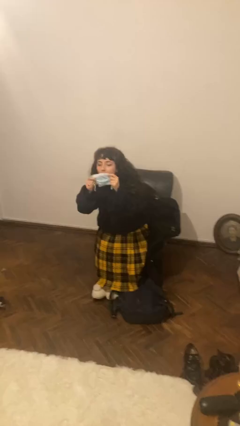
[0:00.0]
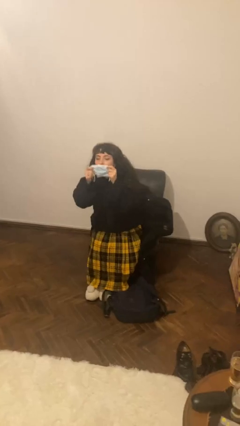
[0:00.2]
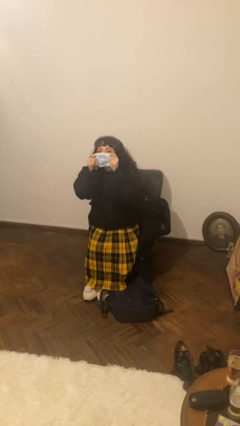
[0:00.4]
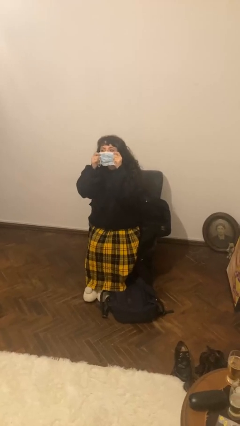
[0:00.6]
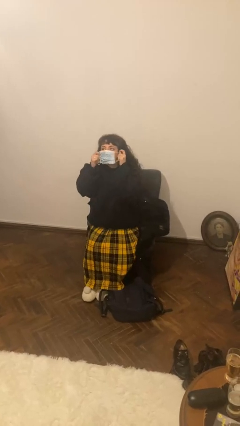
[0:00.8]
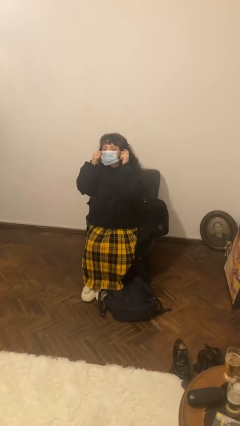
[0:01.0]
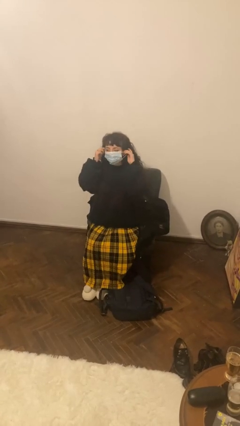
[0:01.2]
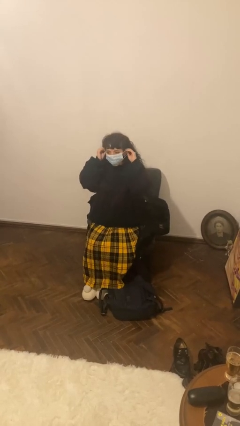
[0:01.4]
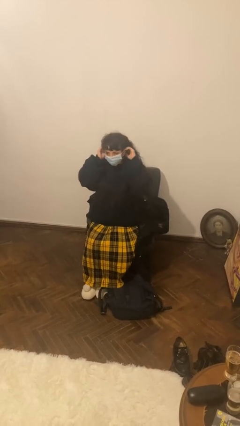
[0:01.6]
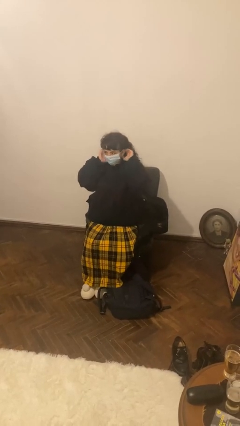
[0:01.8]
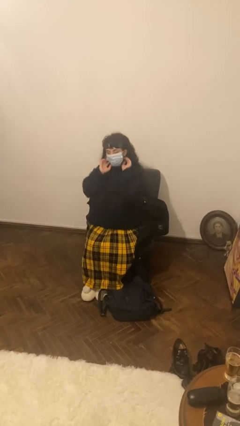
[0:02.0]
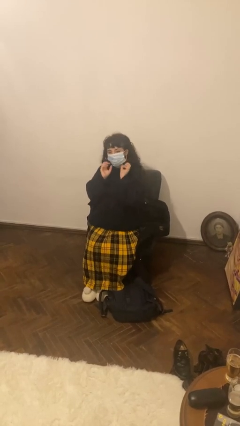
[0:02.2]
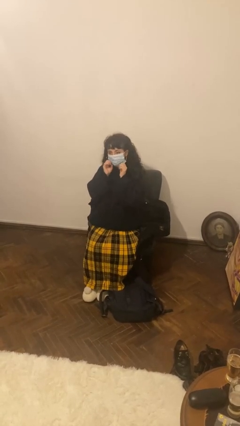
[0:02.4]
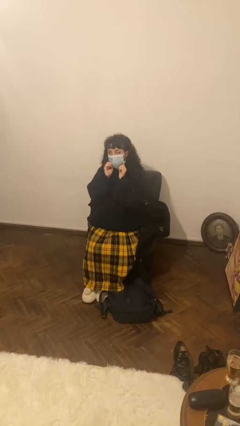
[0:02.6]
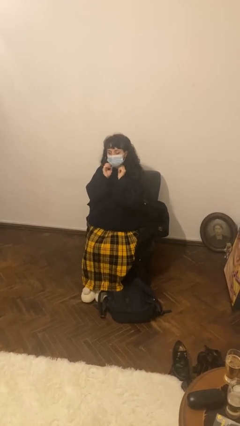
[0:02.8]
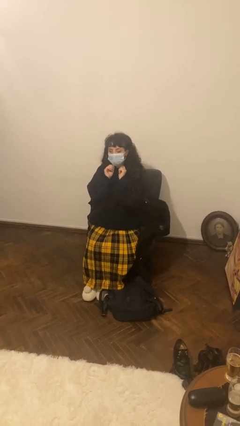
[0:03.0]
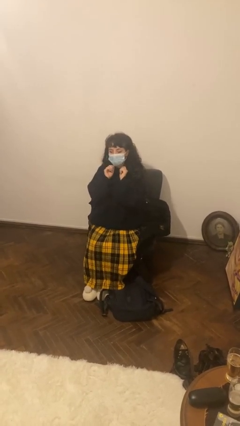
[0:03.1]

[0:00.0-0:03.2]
person puts on facemask

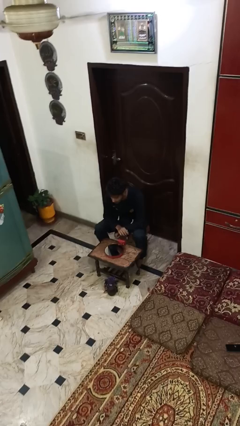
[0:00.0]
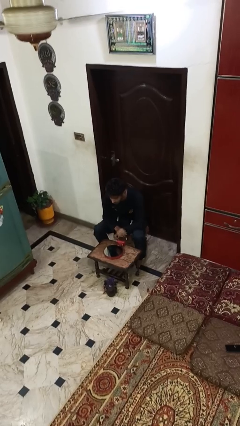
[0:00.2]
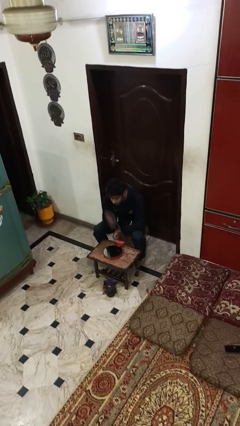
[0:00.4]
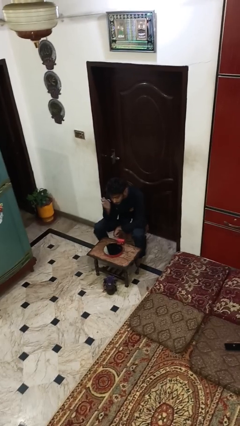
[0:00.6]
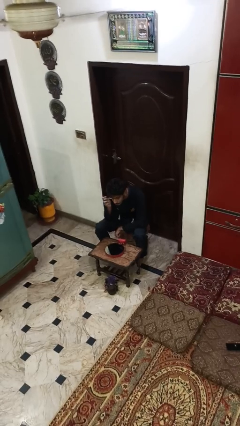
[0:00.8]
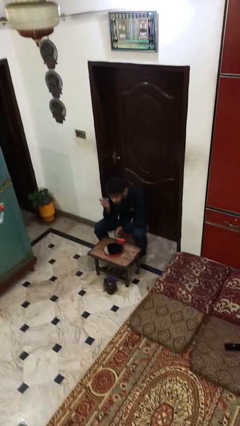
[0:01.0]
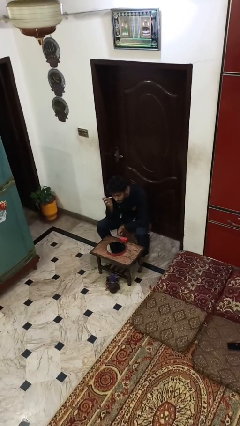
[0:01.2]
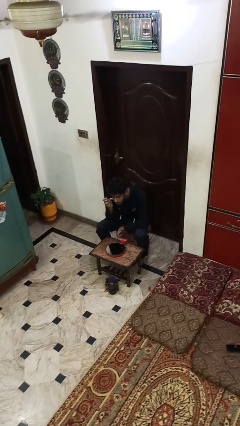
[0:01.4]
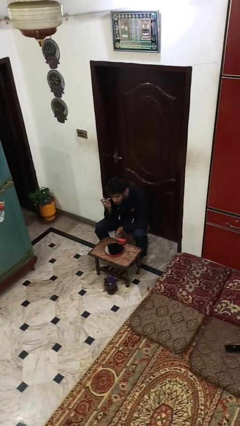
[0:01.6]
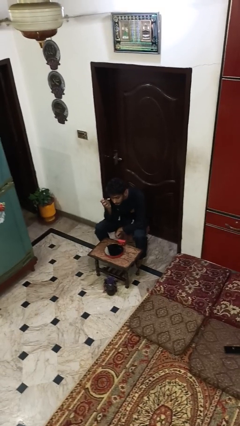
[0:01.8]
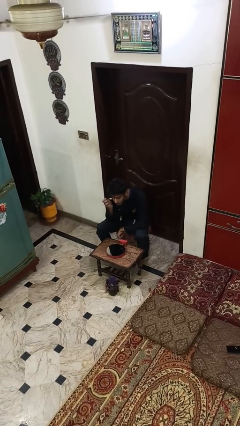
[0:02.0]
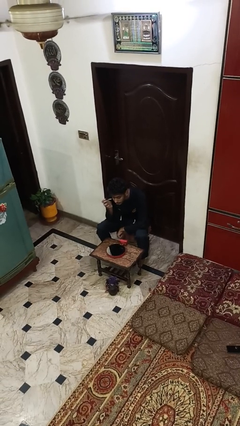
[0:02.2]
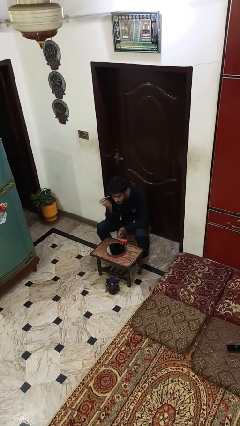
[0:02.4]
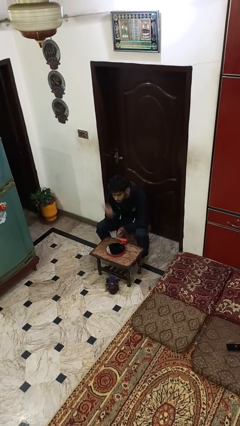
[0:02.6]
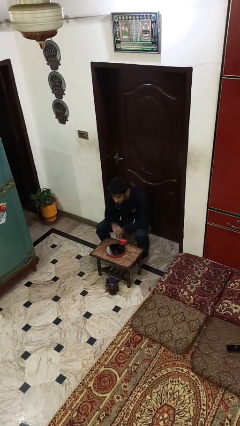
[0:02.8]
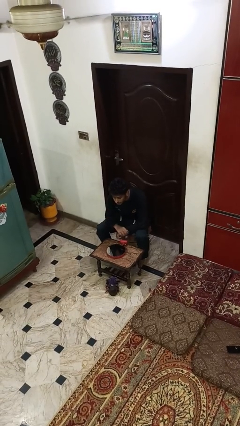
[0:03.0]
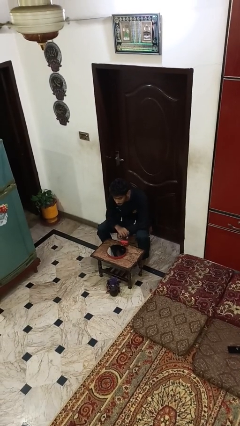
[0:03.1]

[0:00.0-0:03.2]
person applies eye makeup

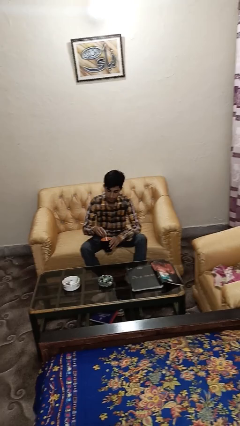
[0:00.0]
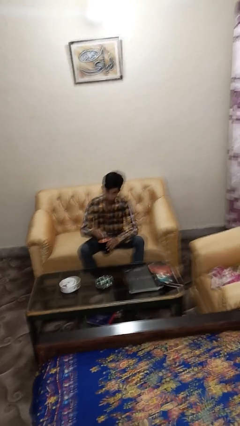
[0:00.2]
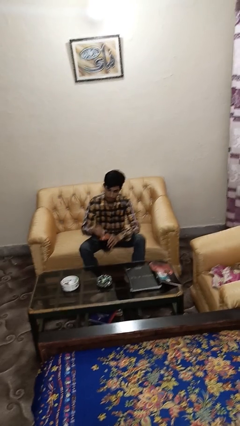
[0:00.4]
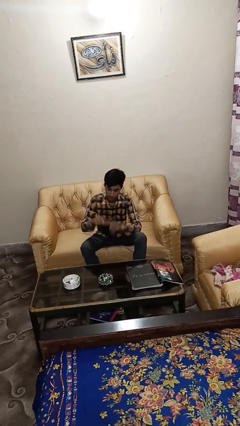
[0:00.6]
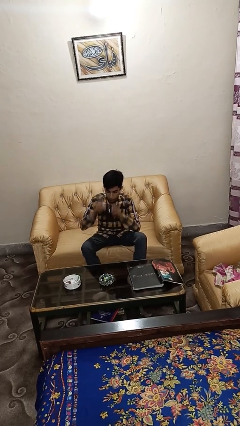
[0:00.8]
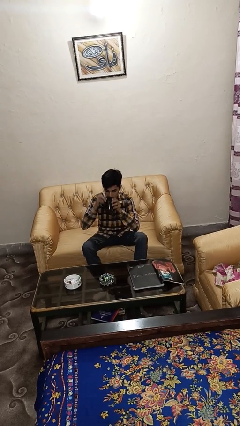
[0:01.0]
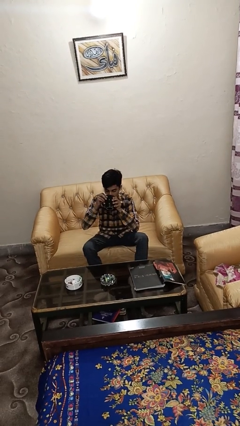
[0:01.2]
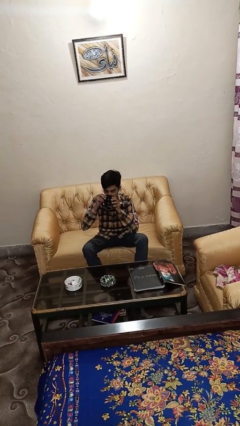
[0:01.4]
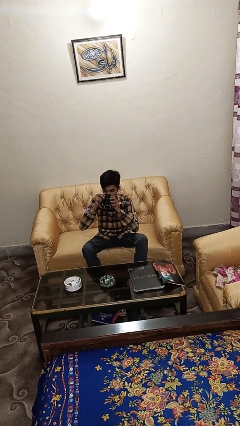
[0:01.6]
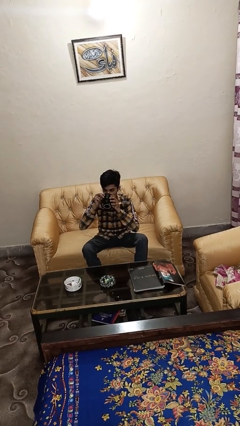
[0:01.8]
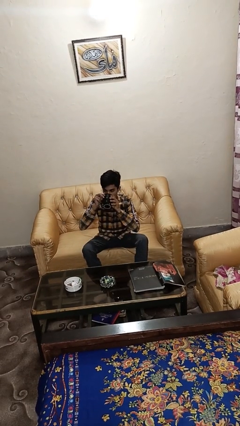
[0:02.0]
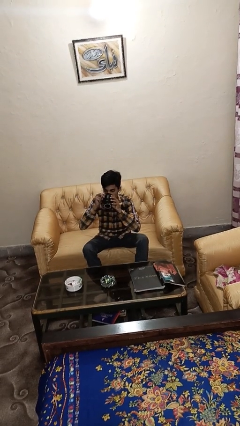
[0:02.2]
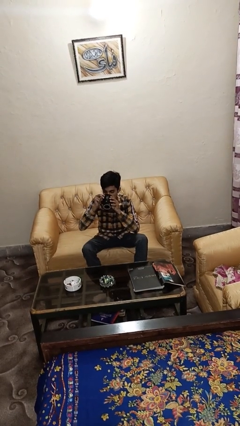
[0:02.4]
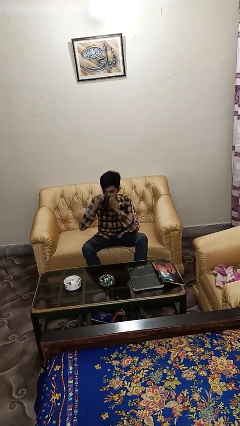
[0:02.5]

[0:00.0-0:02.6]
person drinks from mug

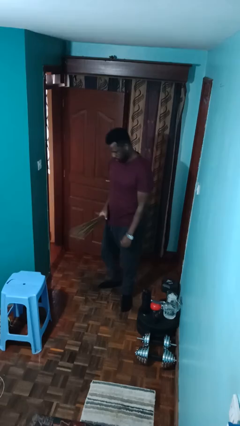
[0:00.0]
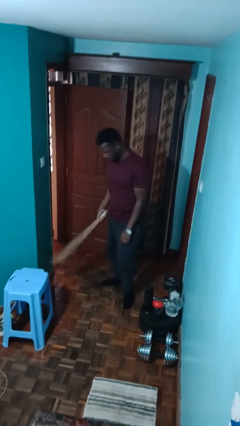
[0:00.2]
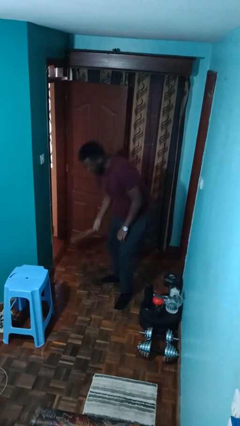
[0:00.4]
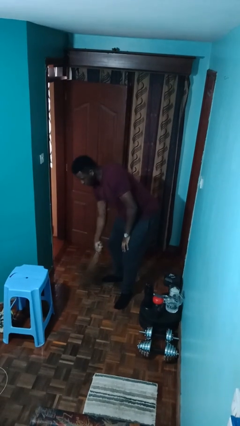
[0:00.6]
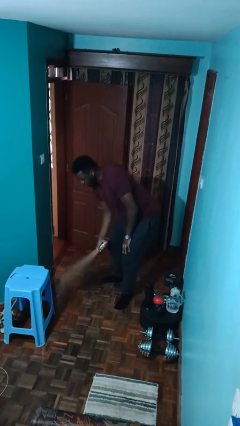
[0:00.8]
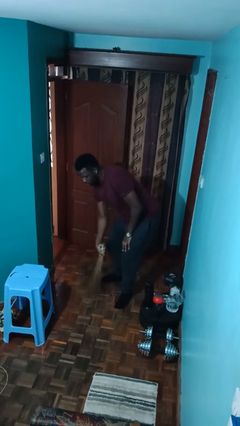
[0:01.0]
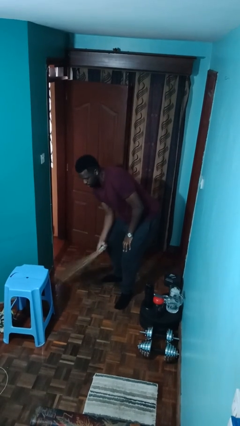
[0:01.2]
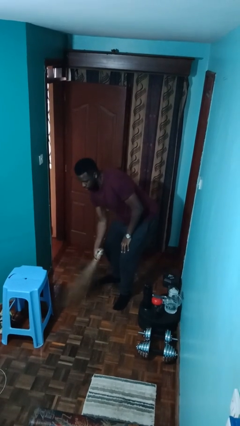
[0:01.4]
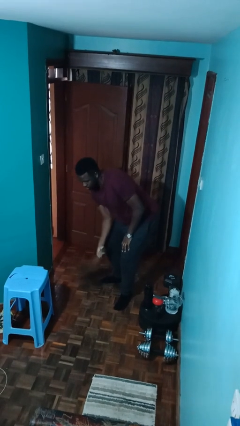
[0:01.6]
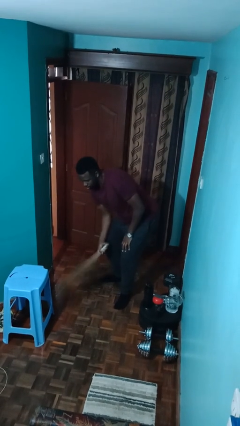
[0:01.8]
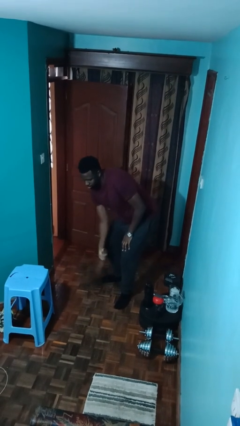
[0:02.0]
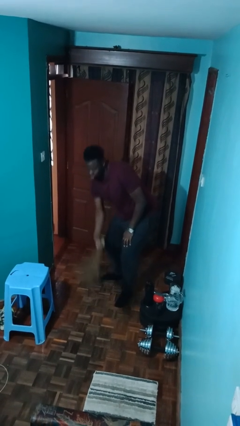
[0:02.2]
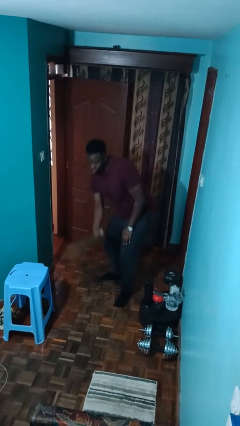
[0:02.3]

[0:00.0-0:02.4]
person sweeps floor

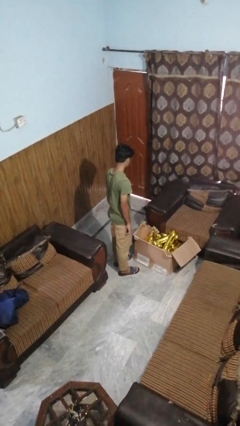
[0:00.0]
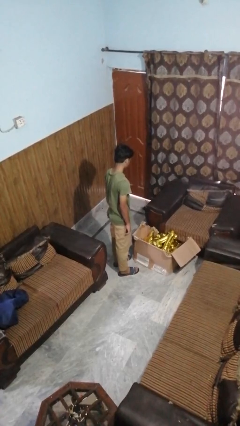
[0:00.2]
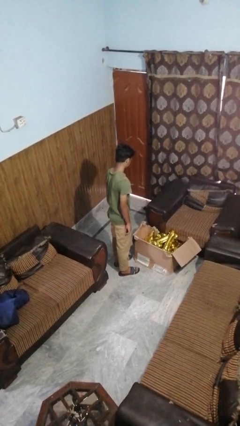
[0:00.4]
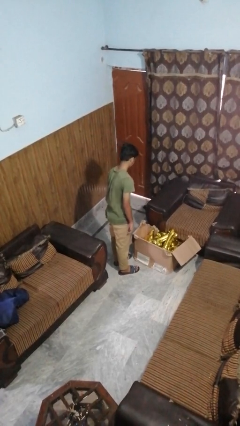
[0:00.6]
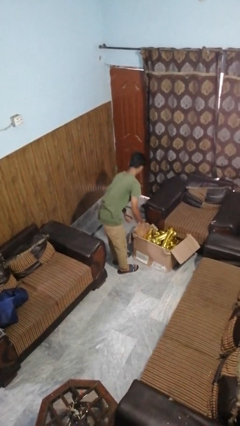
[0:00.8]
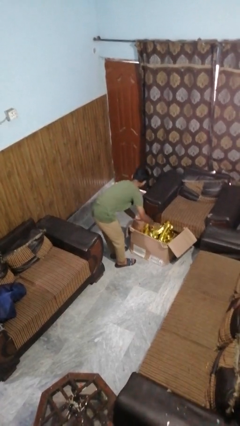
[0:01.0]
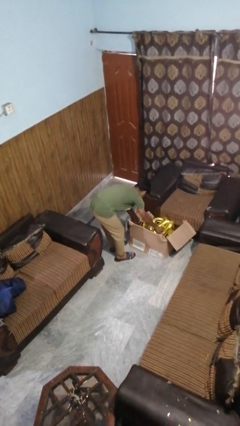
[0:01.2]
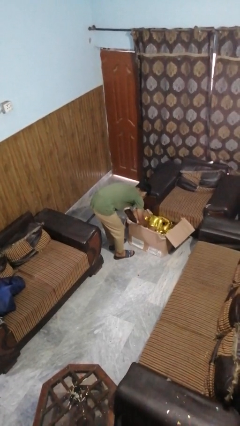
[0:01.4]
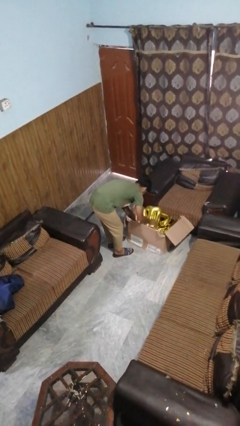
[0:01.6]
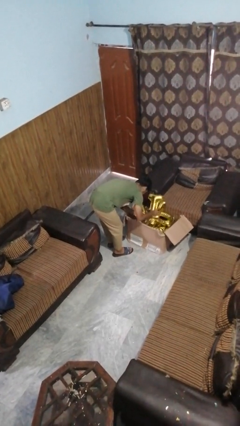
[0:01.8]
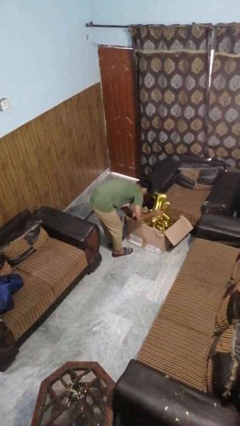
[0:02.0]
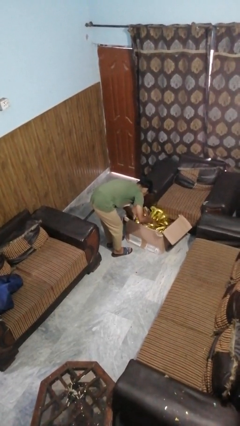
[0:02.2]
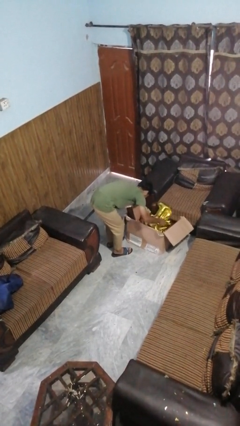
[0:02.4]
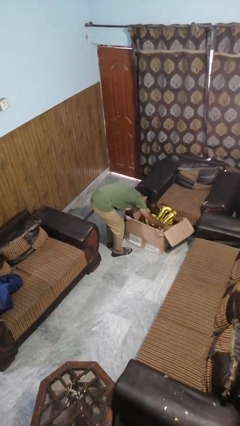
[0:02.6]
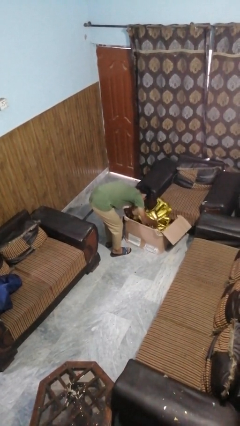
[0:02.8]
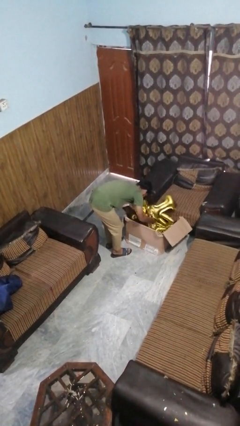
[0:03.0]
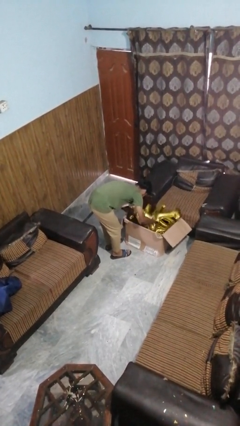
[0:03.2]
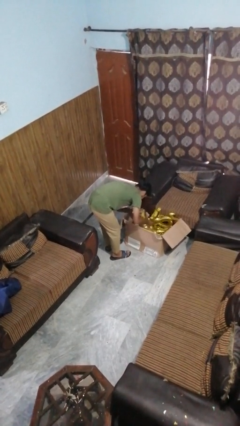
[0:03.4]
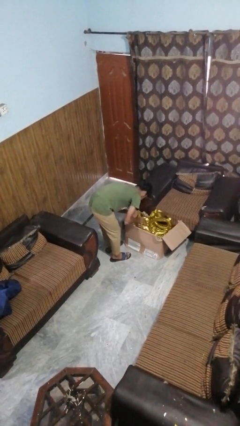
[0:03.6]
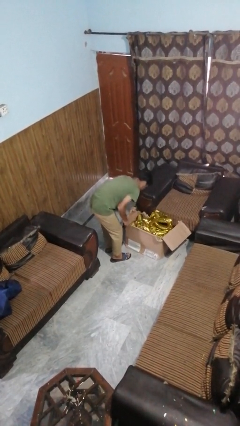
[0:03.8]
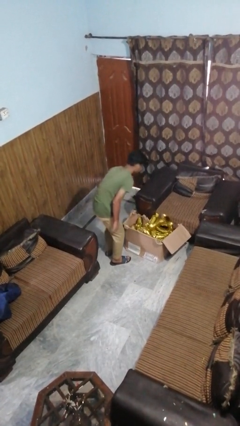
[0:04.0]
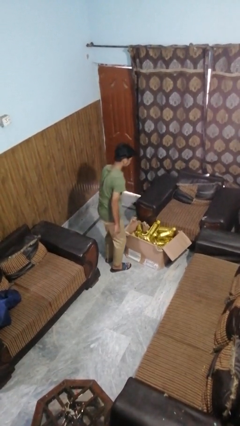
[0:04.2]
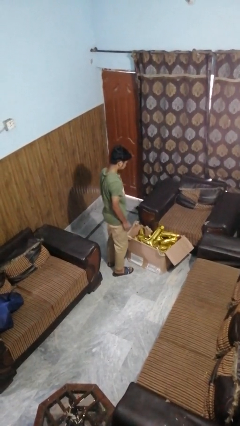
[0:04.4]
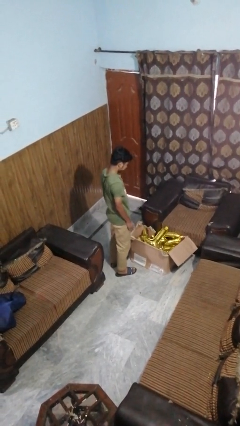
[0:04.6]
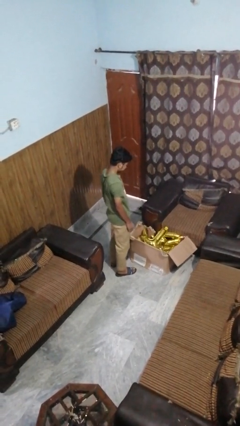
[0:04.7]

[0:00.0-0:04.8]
person searches in box

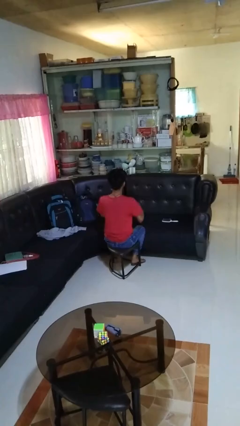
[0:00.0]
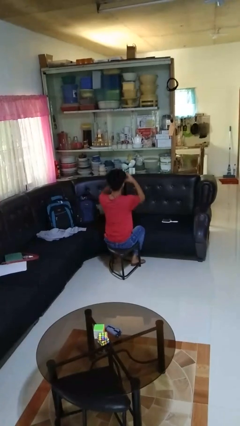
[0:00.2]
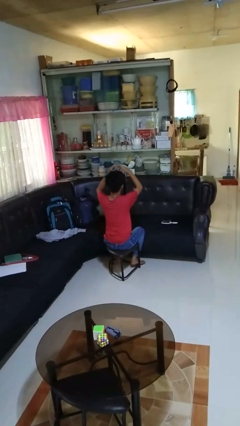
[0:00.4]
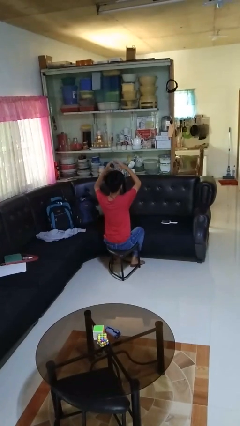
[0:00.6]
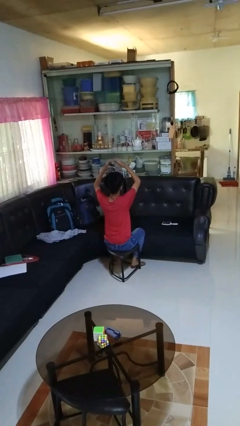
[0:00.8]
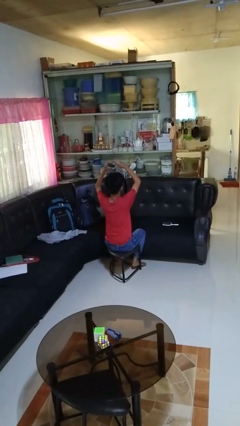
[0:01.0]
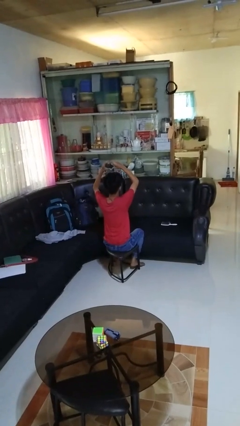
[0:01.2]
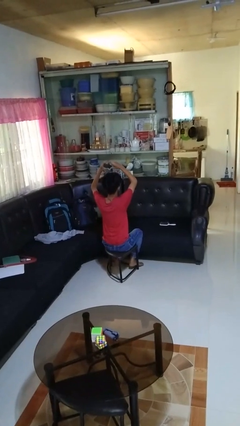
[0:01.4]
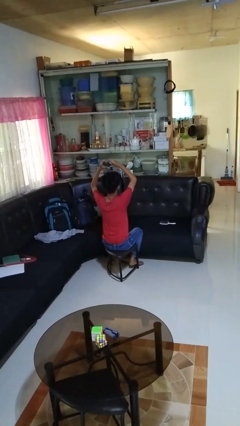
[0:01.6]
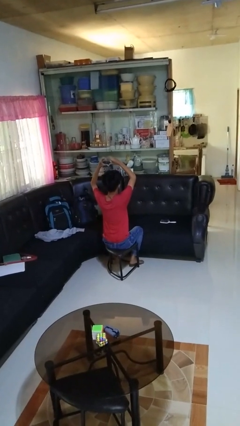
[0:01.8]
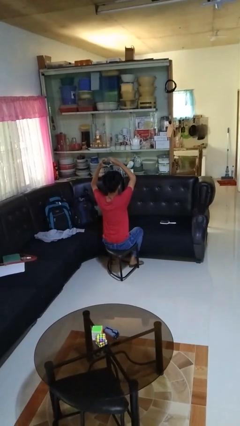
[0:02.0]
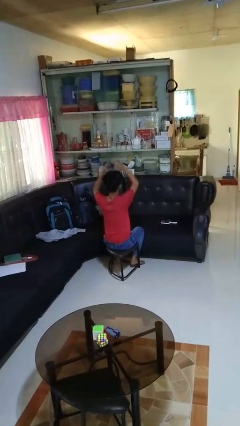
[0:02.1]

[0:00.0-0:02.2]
person gestures heart
